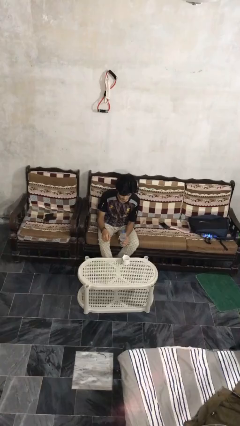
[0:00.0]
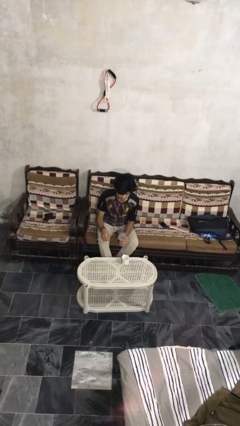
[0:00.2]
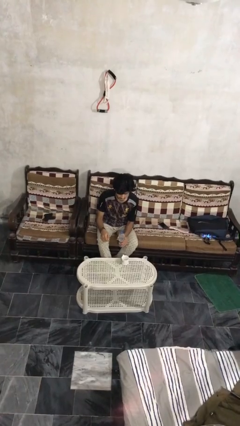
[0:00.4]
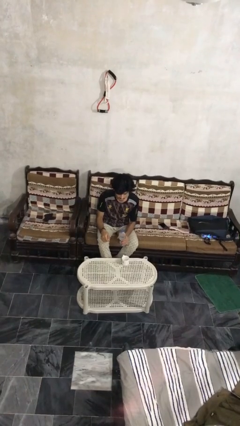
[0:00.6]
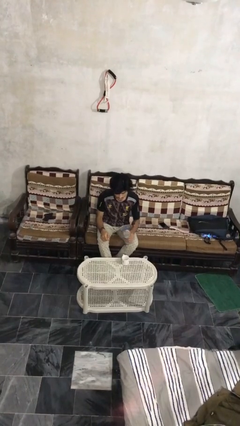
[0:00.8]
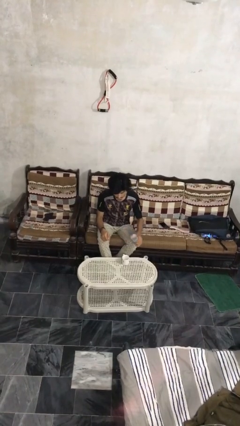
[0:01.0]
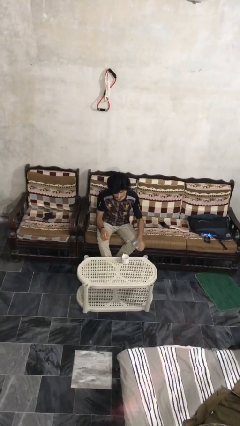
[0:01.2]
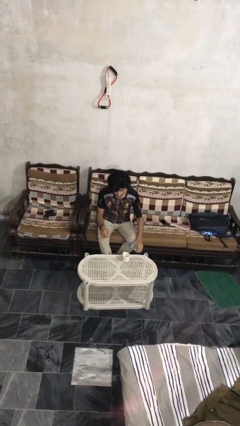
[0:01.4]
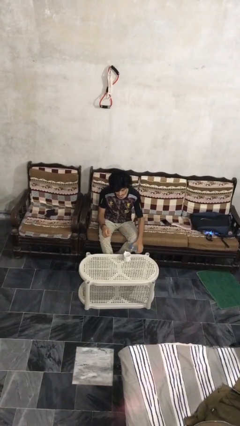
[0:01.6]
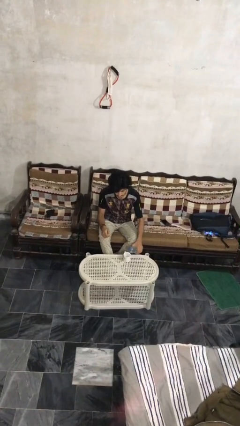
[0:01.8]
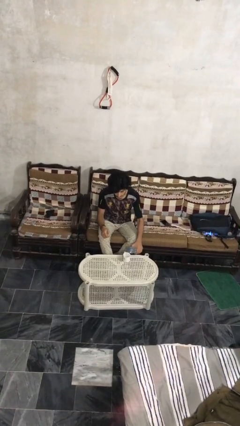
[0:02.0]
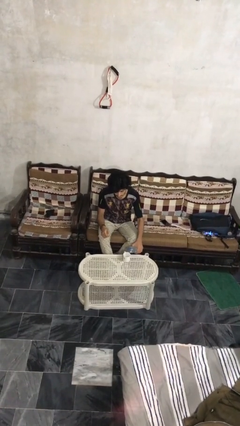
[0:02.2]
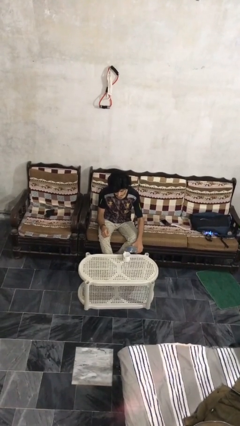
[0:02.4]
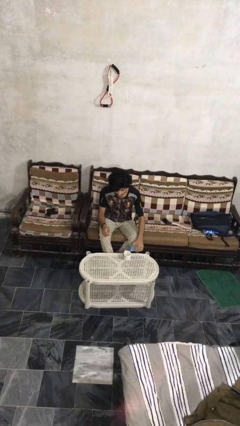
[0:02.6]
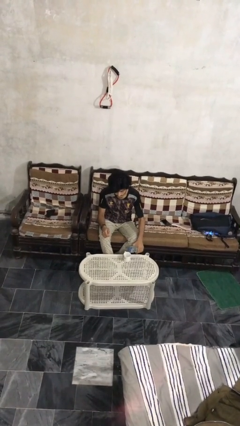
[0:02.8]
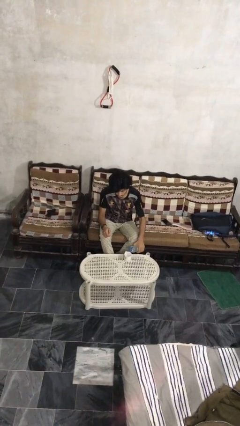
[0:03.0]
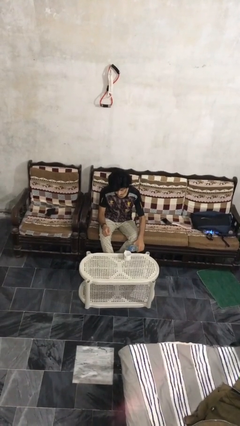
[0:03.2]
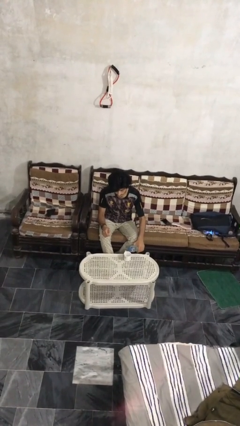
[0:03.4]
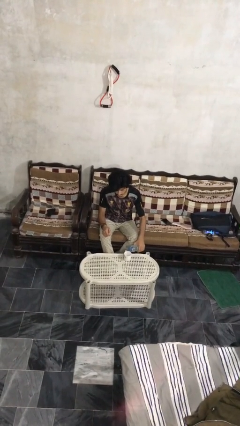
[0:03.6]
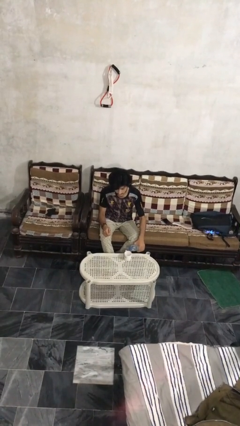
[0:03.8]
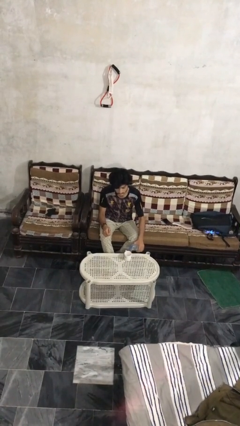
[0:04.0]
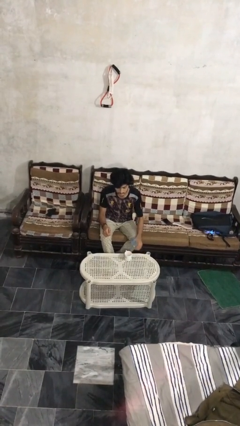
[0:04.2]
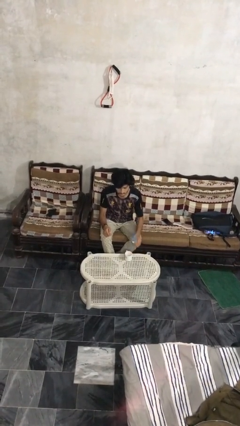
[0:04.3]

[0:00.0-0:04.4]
person pours liquid into cup

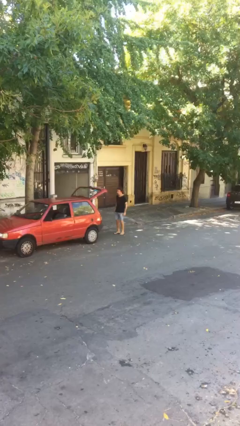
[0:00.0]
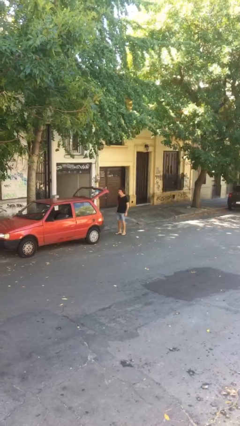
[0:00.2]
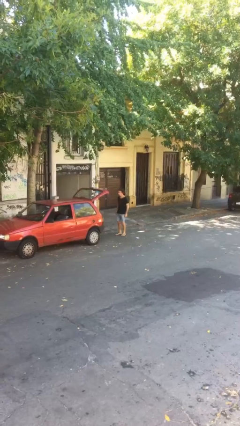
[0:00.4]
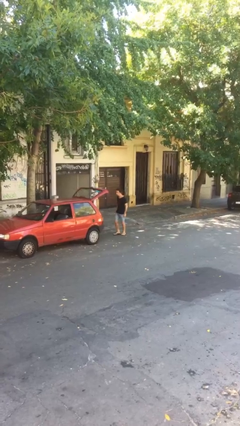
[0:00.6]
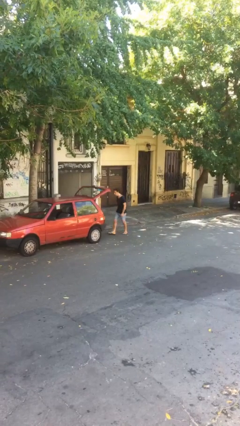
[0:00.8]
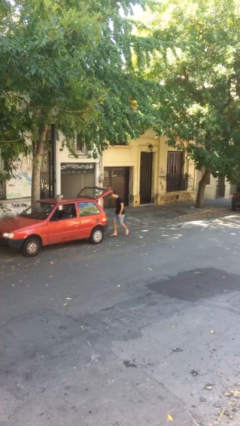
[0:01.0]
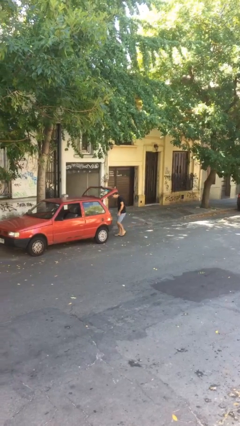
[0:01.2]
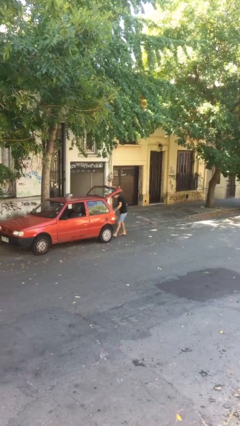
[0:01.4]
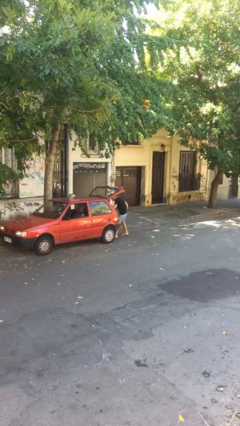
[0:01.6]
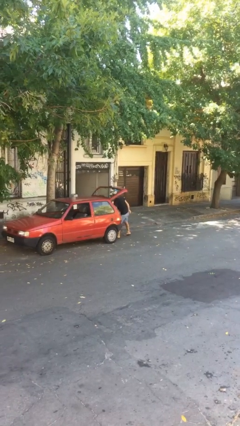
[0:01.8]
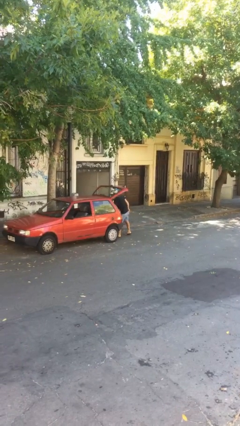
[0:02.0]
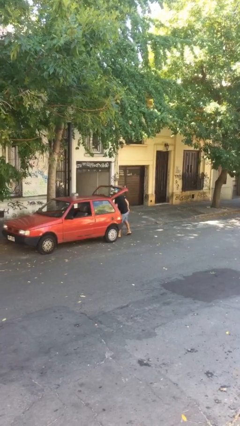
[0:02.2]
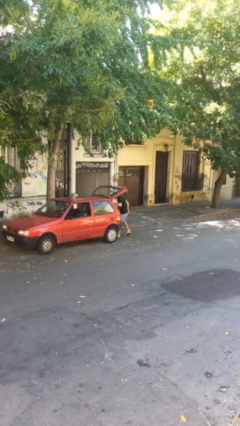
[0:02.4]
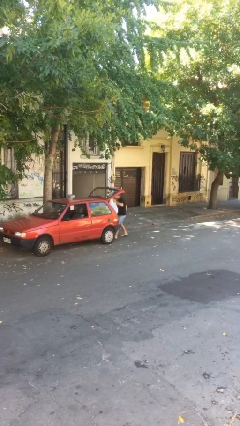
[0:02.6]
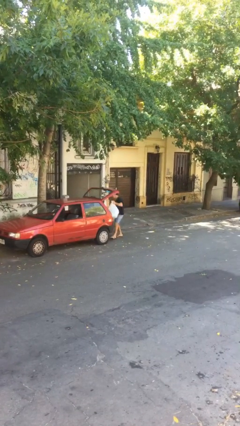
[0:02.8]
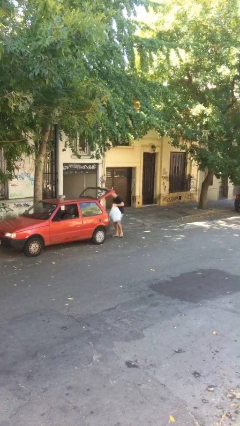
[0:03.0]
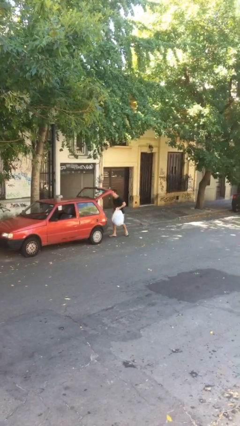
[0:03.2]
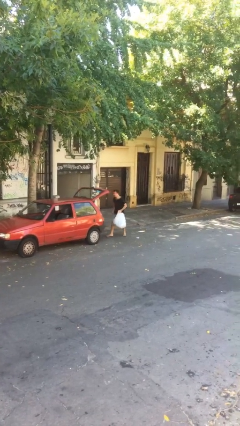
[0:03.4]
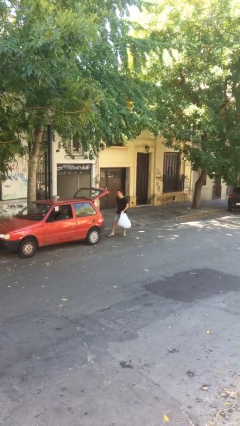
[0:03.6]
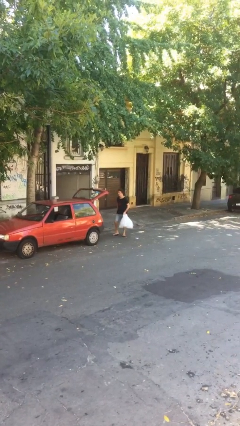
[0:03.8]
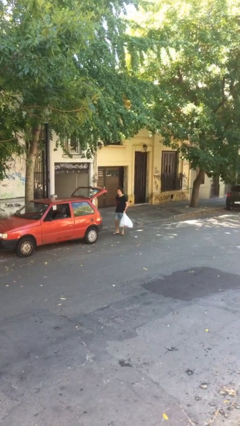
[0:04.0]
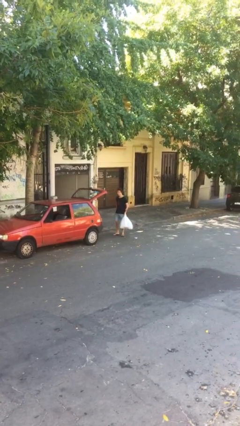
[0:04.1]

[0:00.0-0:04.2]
person unloads car

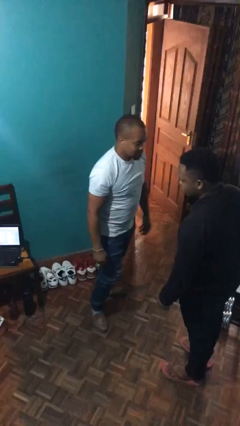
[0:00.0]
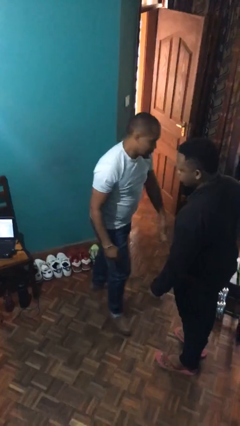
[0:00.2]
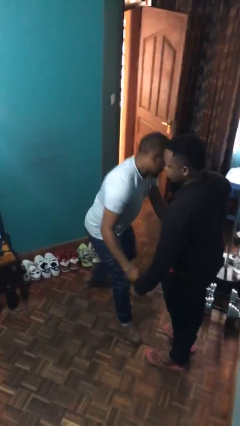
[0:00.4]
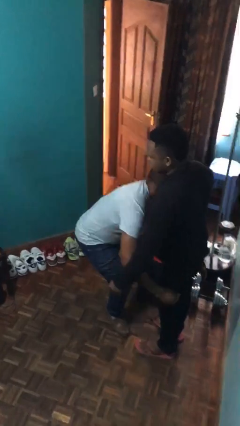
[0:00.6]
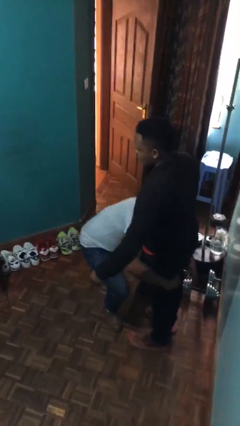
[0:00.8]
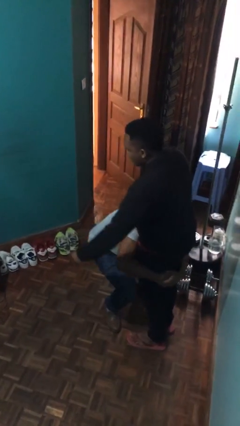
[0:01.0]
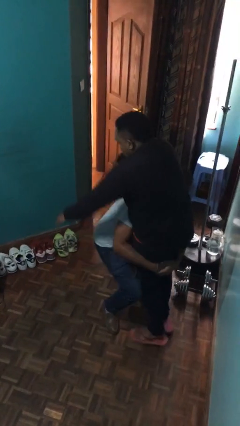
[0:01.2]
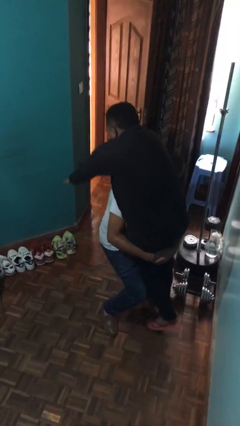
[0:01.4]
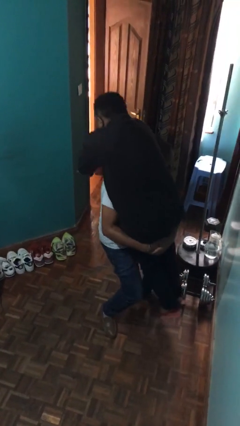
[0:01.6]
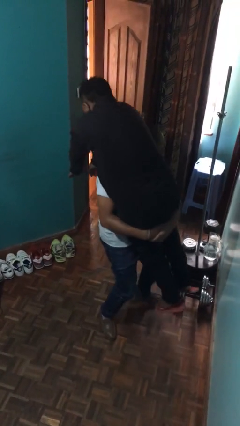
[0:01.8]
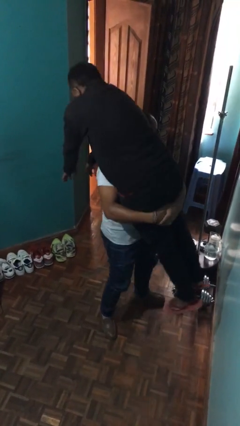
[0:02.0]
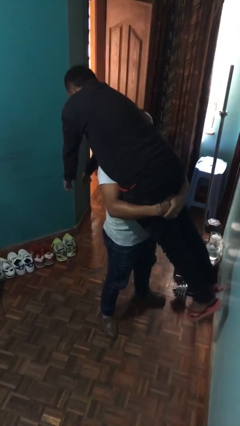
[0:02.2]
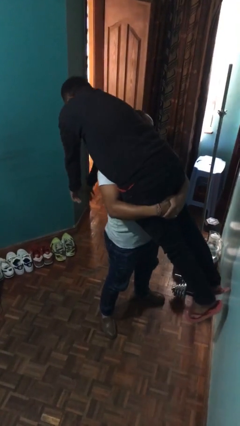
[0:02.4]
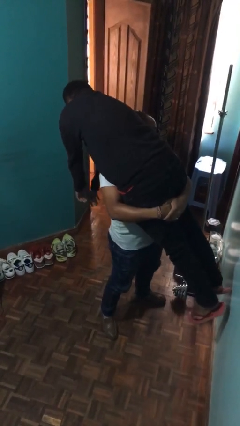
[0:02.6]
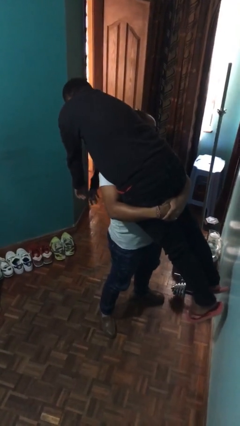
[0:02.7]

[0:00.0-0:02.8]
person carries person over shoulder

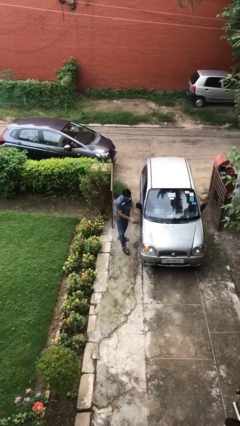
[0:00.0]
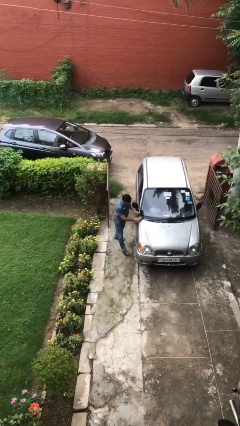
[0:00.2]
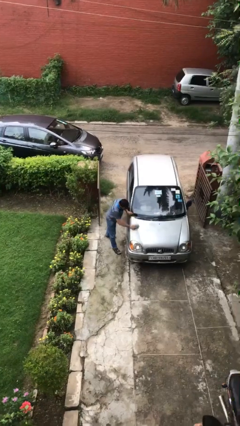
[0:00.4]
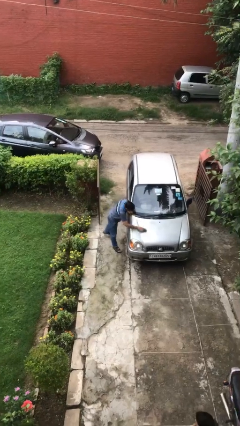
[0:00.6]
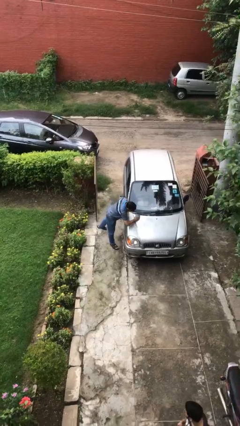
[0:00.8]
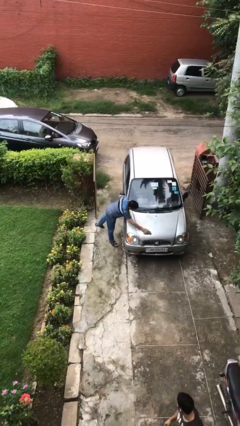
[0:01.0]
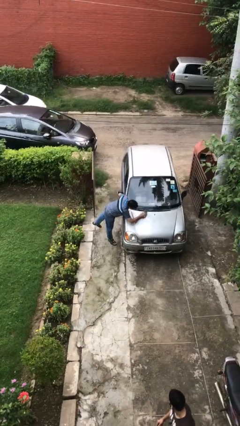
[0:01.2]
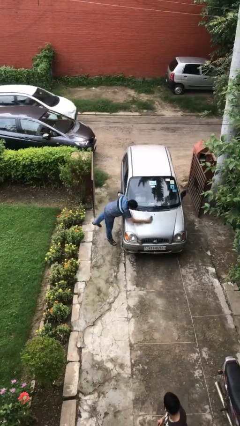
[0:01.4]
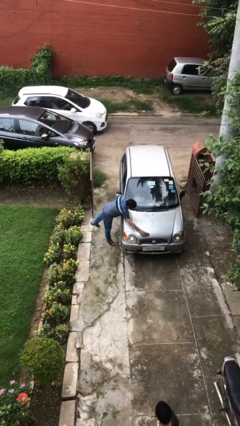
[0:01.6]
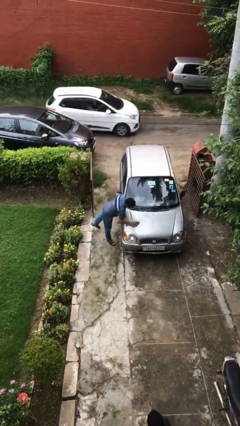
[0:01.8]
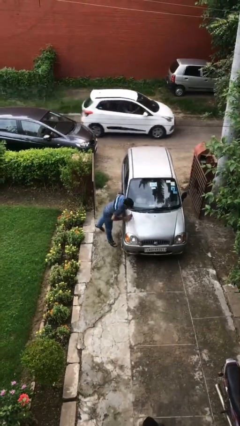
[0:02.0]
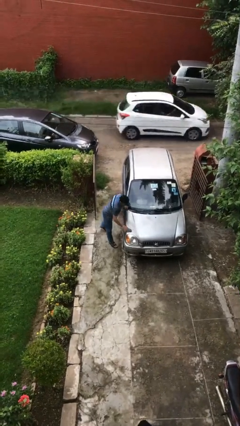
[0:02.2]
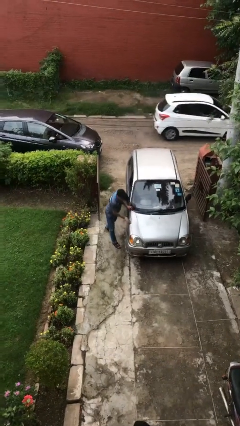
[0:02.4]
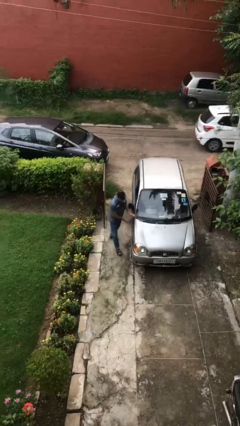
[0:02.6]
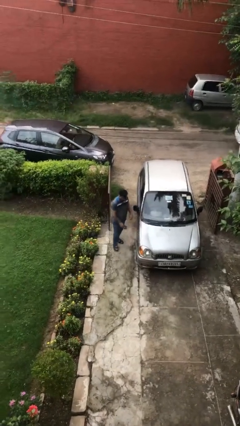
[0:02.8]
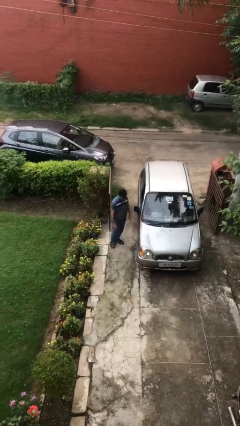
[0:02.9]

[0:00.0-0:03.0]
person polishes car with rag

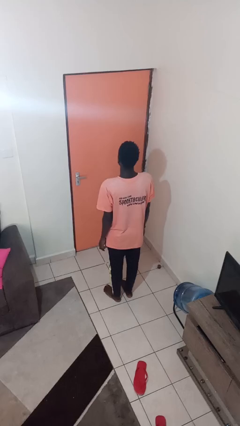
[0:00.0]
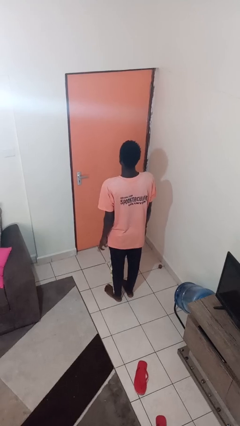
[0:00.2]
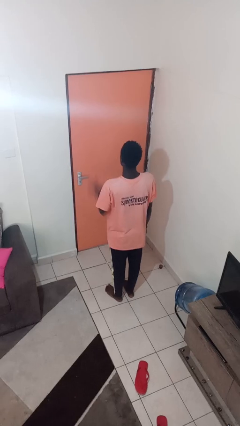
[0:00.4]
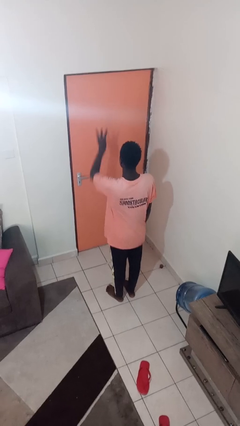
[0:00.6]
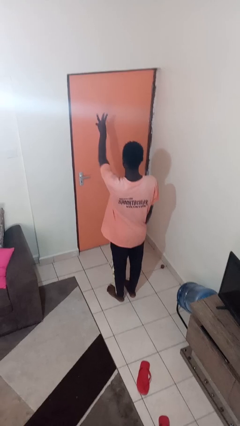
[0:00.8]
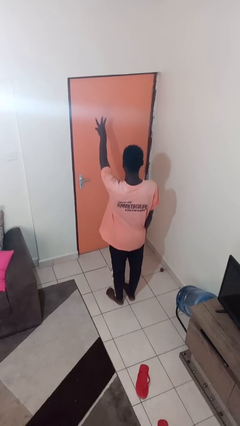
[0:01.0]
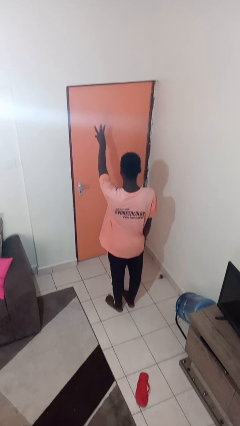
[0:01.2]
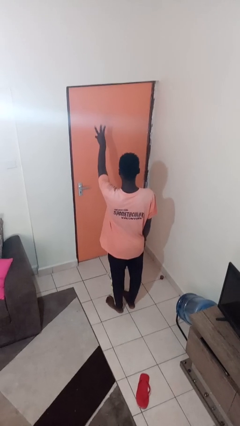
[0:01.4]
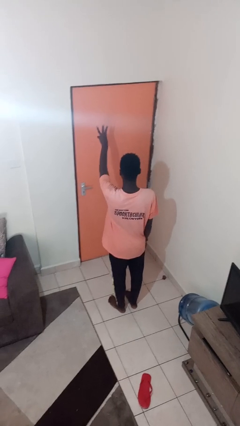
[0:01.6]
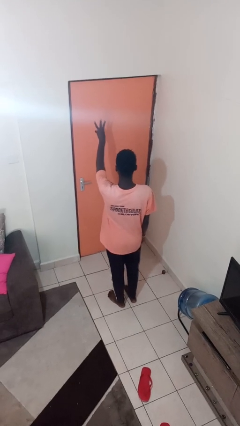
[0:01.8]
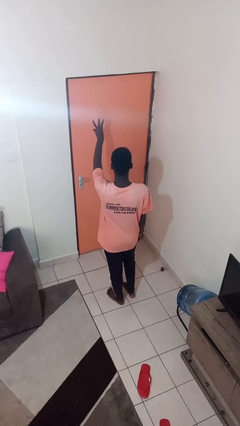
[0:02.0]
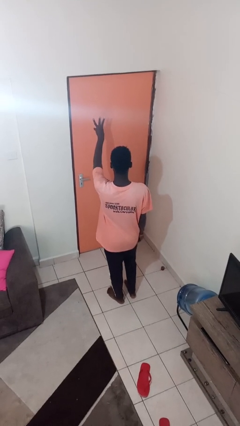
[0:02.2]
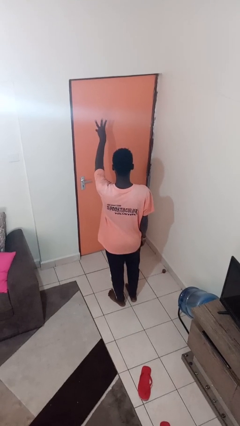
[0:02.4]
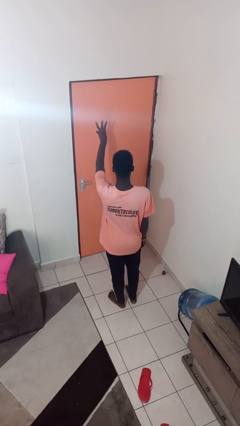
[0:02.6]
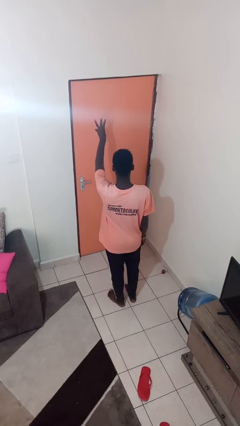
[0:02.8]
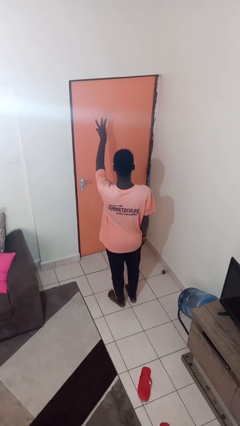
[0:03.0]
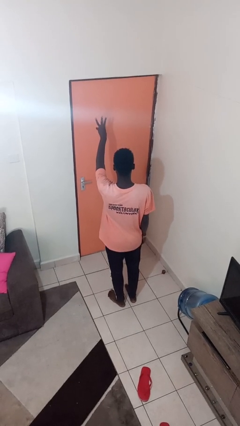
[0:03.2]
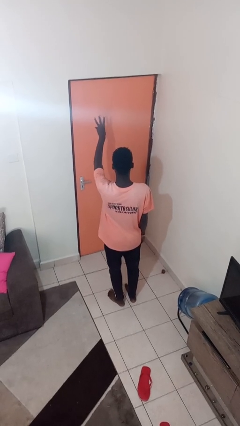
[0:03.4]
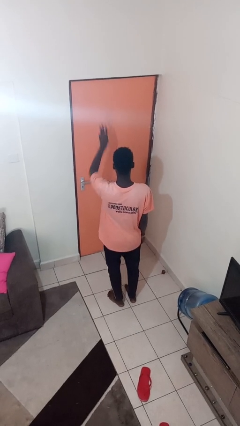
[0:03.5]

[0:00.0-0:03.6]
person gestures number three
